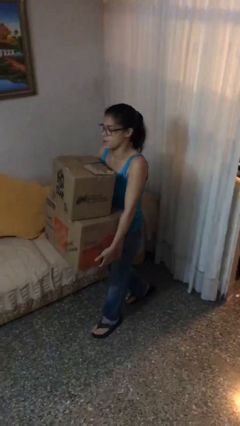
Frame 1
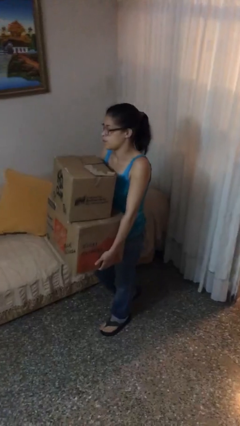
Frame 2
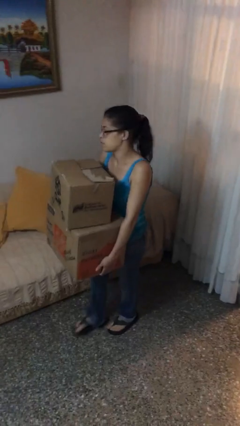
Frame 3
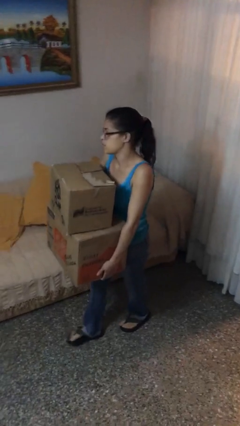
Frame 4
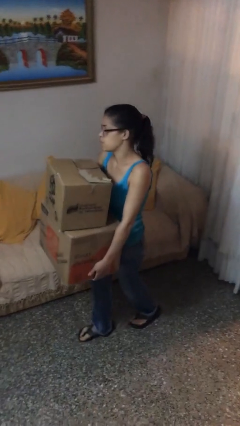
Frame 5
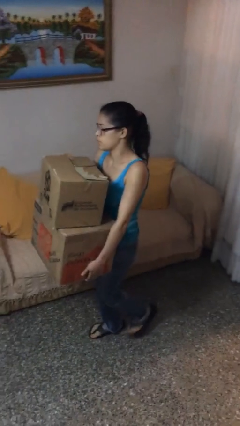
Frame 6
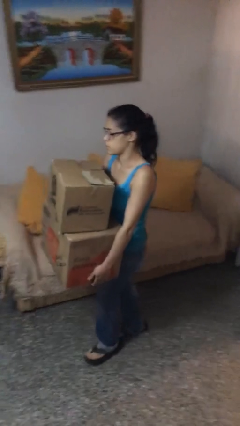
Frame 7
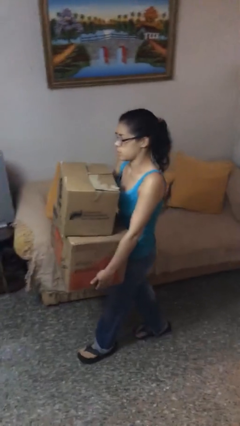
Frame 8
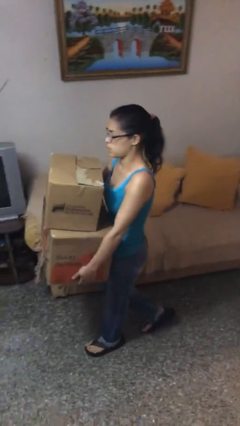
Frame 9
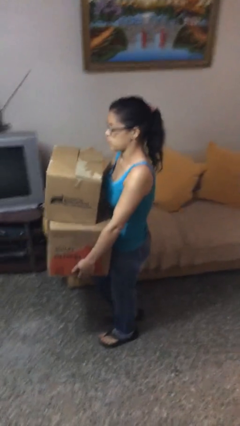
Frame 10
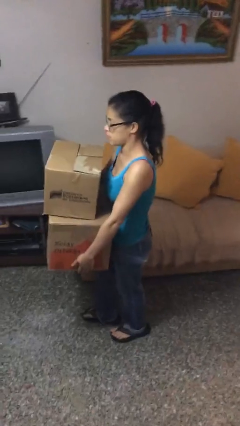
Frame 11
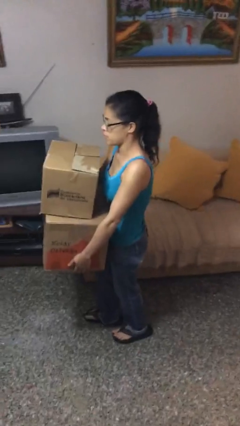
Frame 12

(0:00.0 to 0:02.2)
person carries heavy object

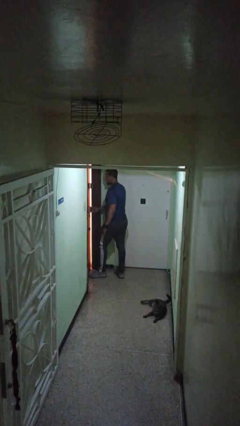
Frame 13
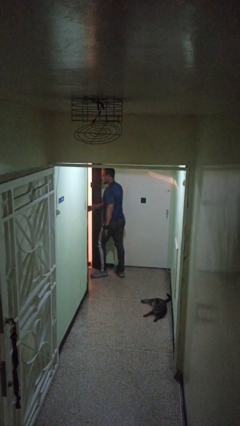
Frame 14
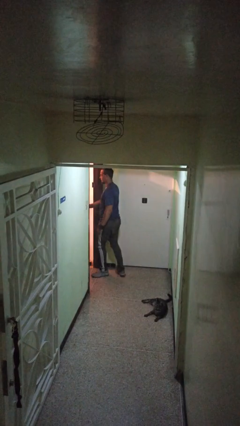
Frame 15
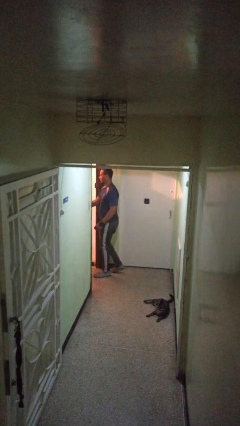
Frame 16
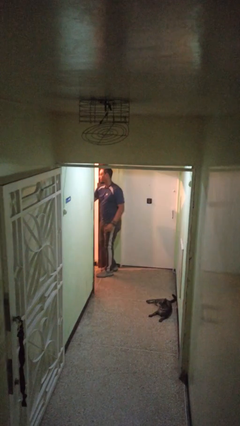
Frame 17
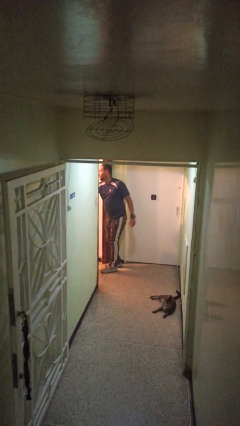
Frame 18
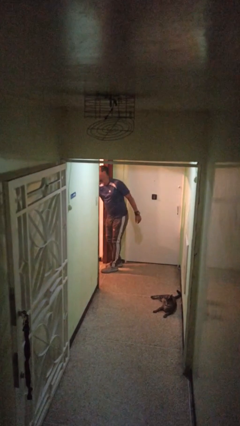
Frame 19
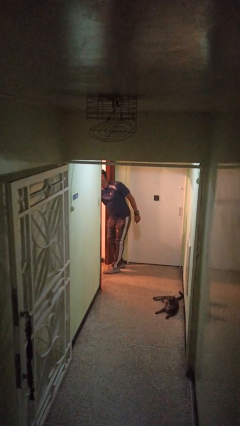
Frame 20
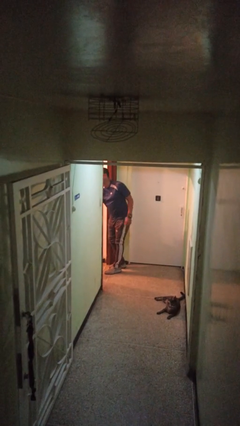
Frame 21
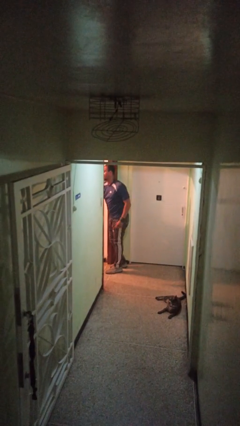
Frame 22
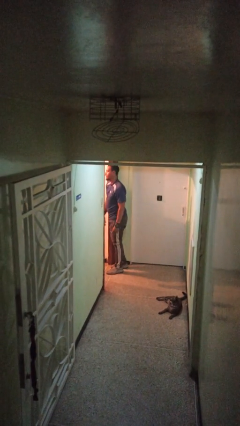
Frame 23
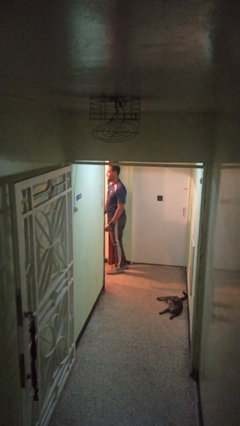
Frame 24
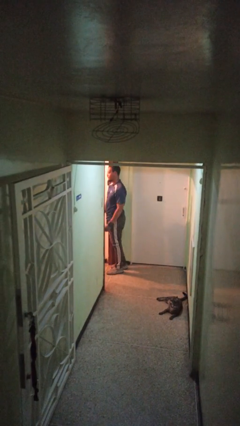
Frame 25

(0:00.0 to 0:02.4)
person opens facility door

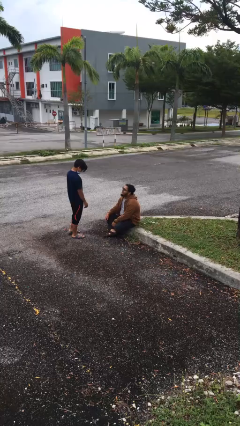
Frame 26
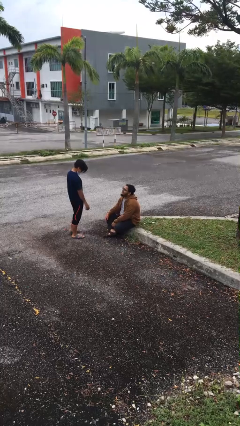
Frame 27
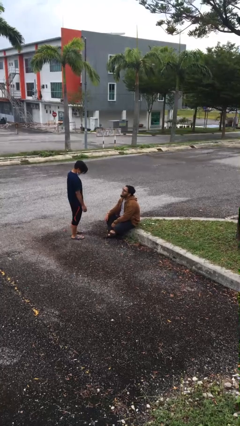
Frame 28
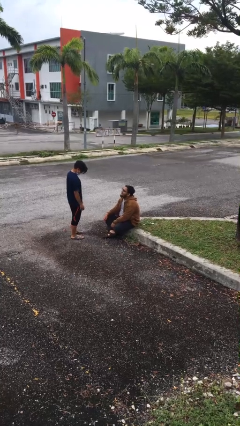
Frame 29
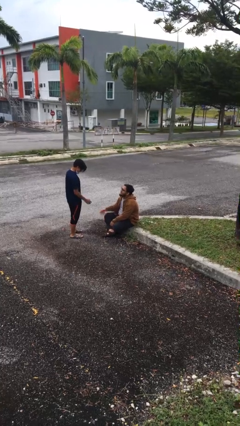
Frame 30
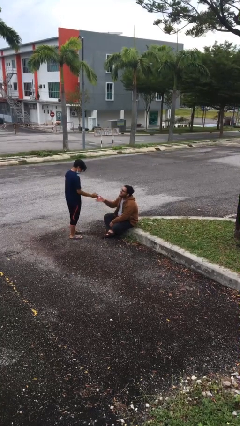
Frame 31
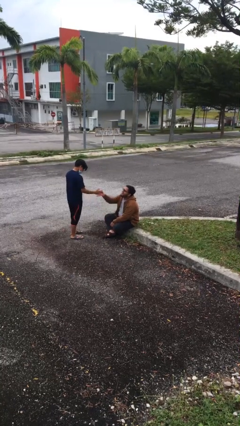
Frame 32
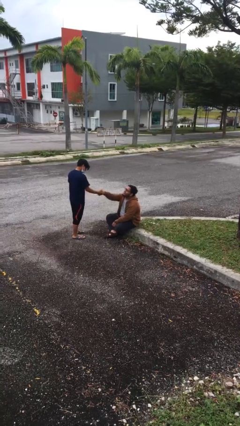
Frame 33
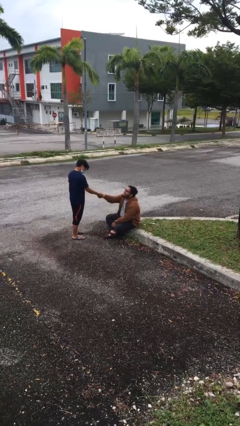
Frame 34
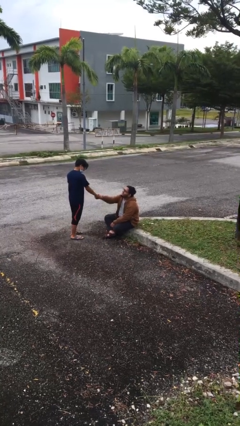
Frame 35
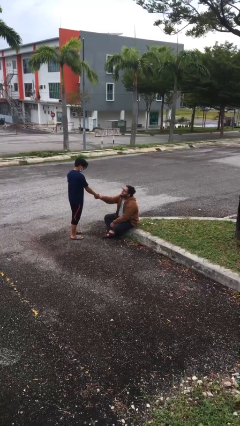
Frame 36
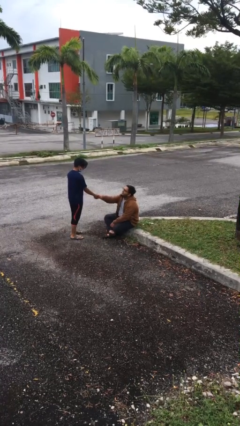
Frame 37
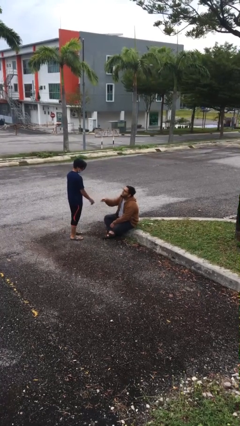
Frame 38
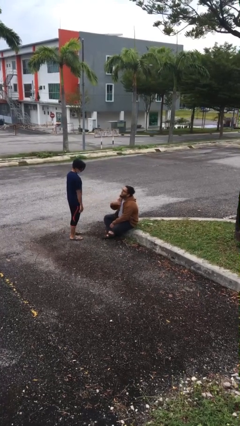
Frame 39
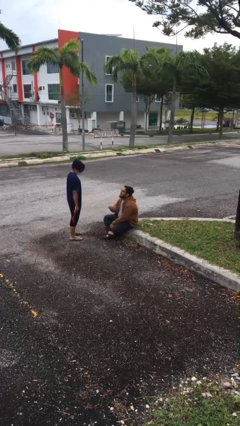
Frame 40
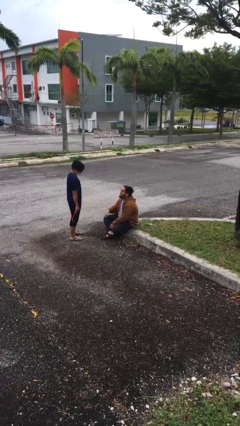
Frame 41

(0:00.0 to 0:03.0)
person shakes hand

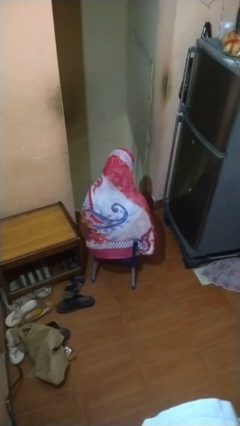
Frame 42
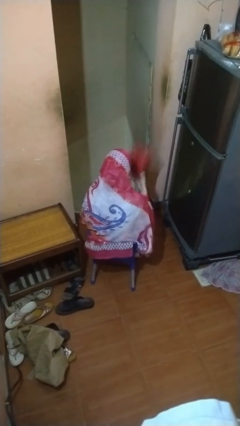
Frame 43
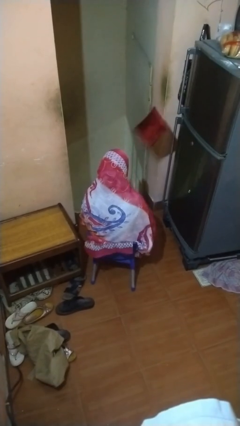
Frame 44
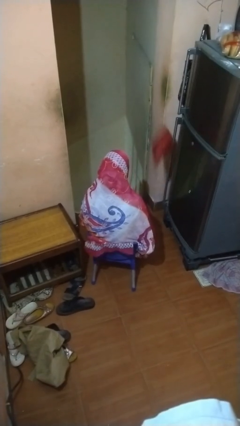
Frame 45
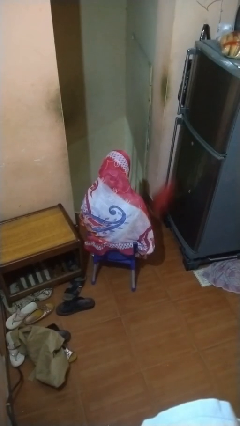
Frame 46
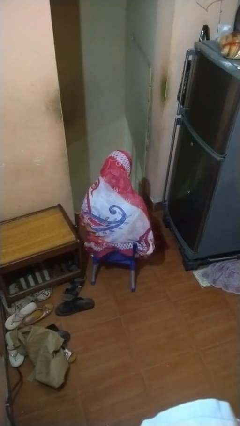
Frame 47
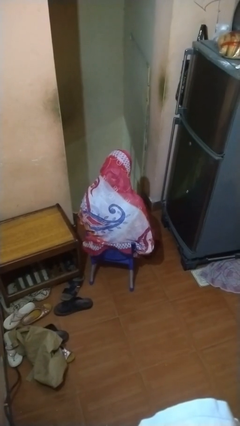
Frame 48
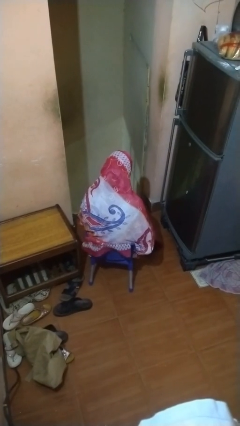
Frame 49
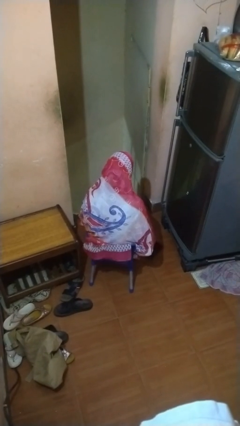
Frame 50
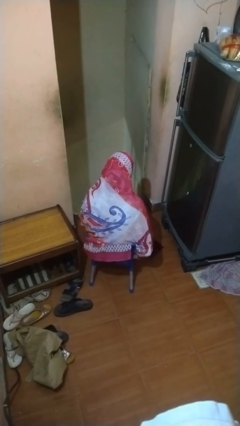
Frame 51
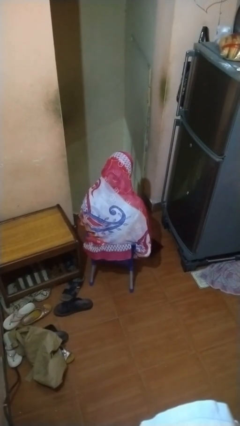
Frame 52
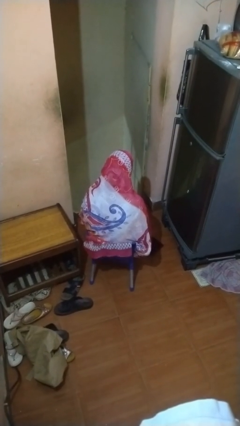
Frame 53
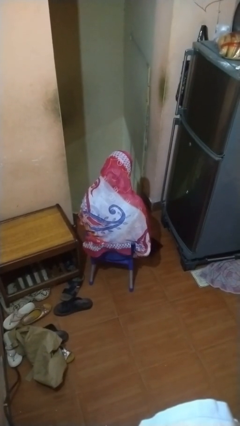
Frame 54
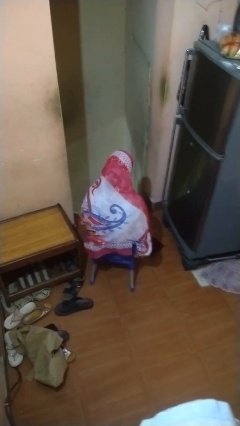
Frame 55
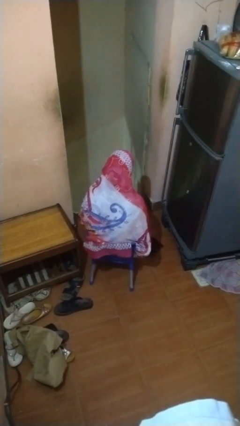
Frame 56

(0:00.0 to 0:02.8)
person throws object into air

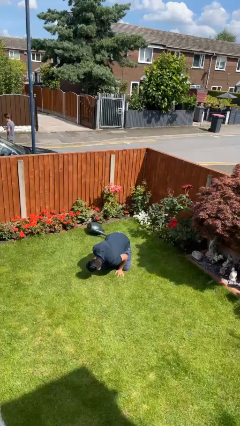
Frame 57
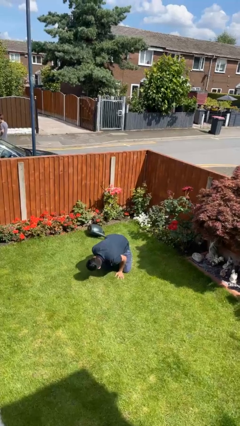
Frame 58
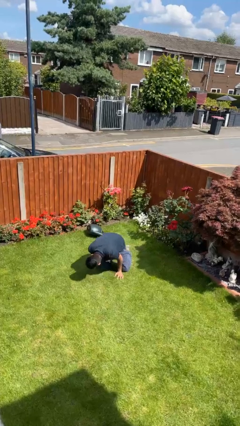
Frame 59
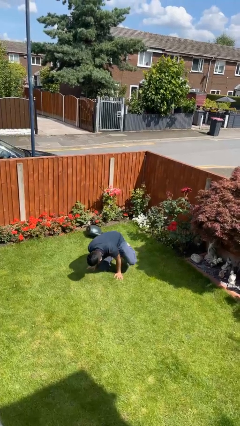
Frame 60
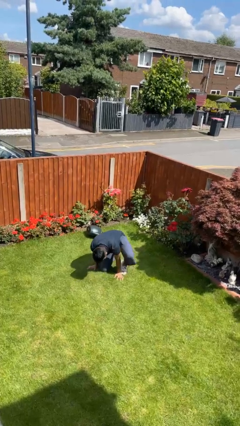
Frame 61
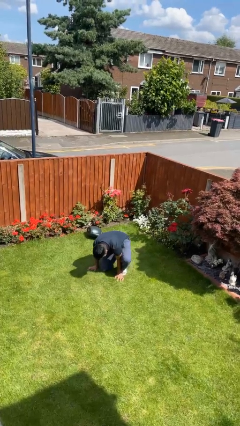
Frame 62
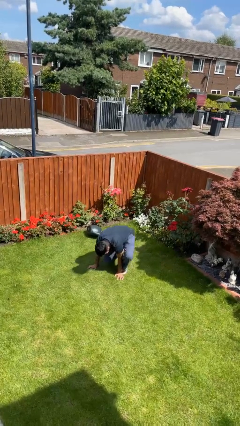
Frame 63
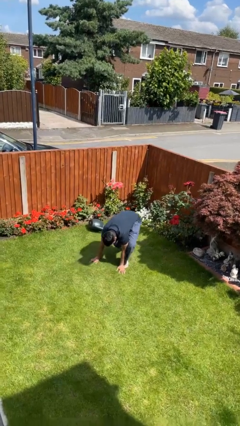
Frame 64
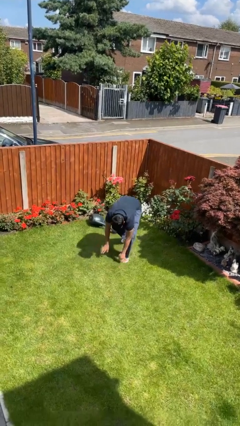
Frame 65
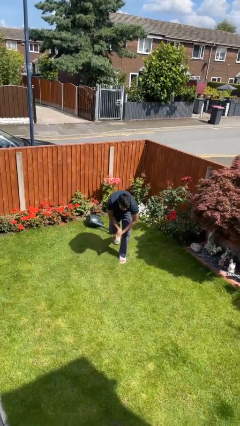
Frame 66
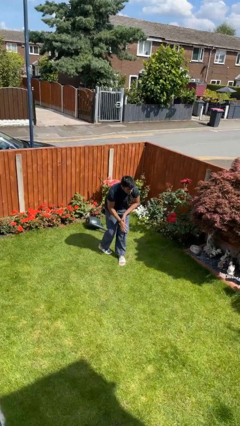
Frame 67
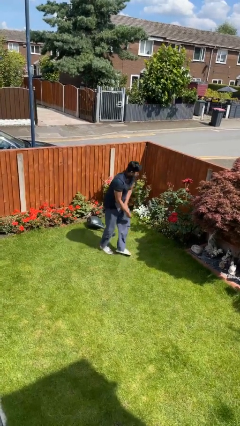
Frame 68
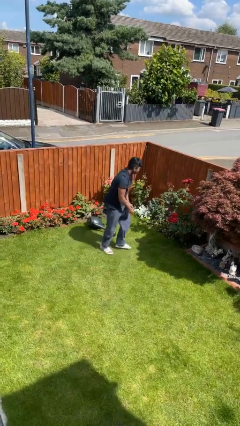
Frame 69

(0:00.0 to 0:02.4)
person stands up from floor

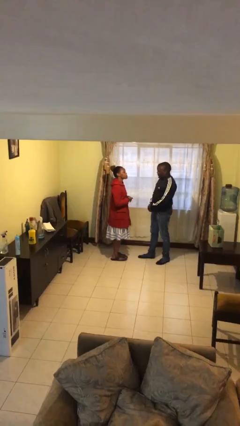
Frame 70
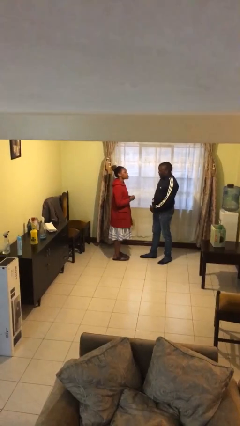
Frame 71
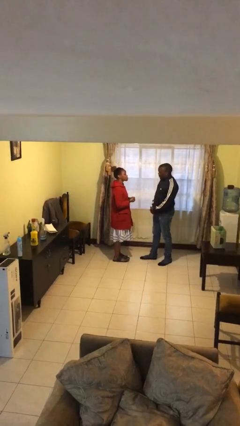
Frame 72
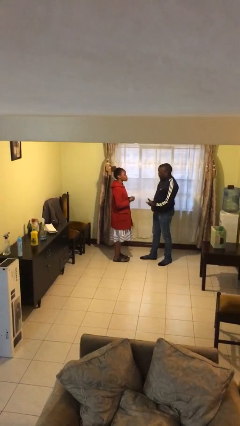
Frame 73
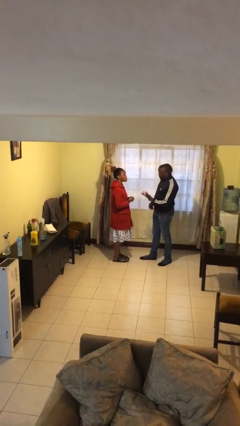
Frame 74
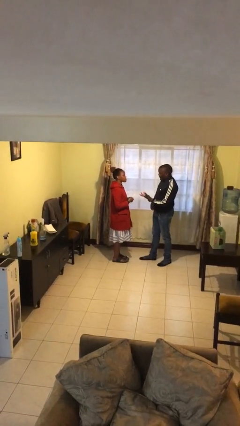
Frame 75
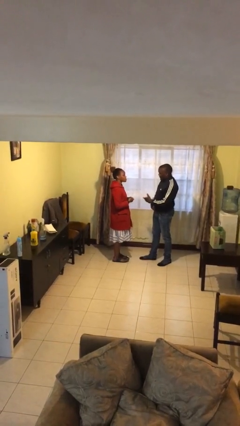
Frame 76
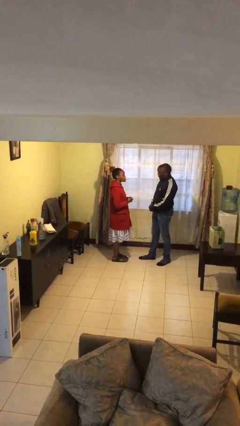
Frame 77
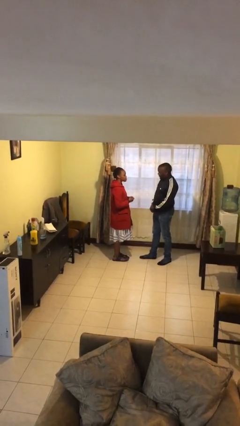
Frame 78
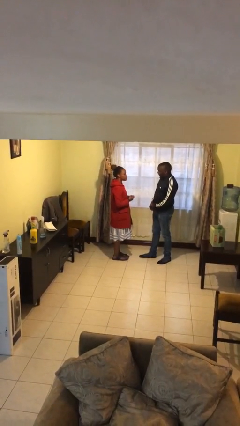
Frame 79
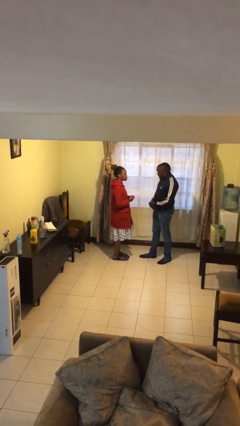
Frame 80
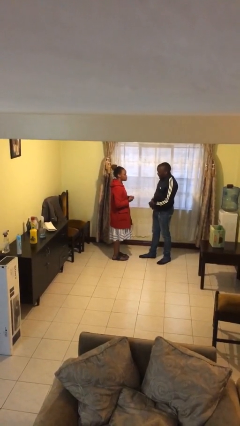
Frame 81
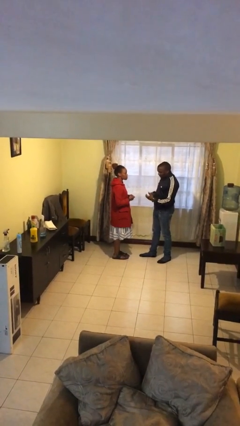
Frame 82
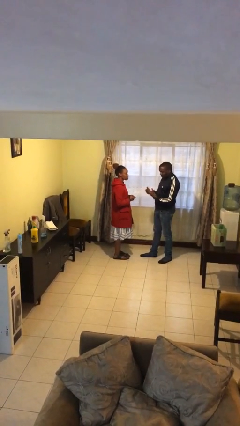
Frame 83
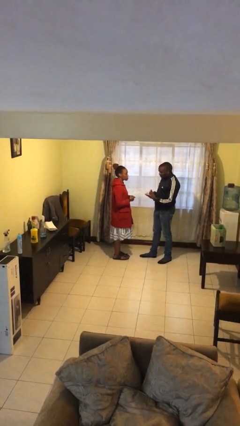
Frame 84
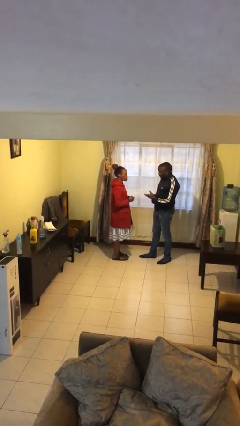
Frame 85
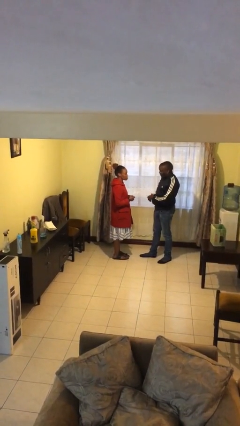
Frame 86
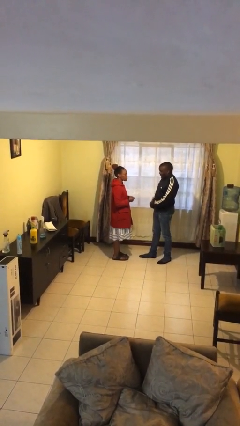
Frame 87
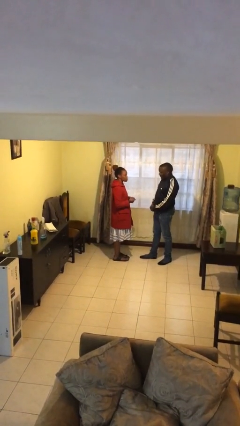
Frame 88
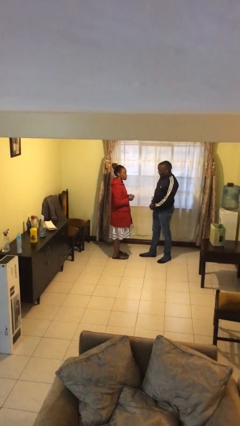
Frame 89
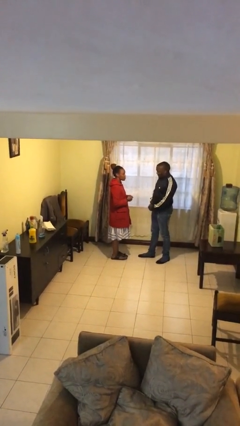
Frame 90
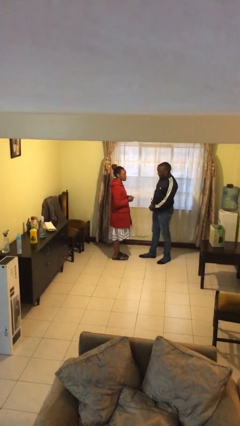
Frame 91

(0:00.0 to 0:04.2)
person talks to person
